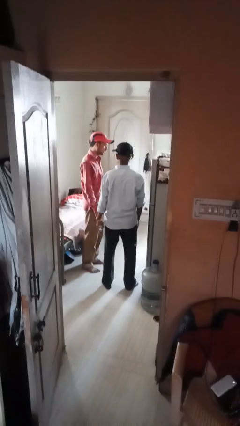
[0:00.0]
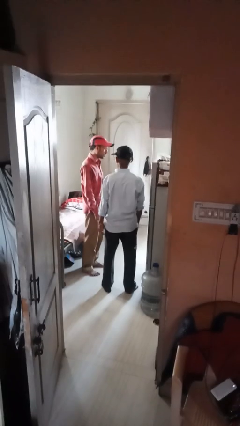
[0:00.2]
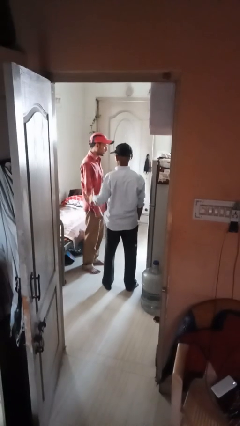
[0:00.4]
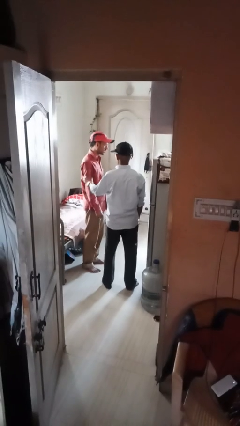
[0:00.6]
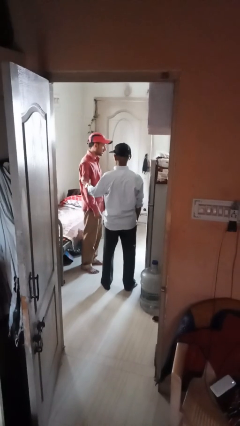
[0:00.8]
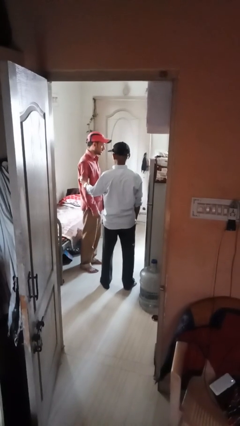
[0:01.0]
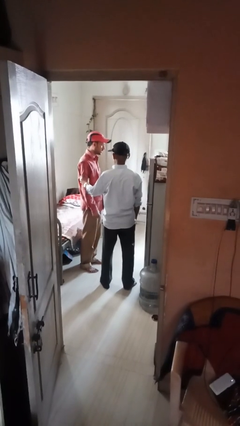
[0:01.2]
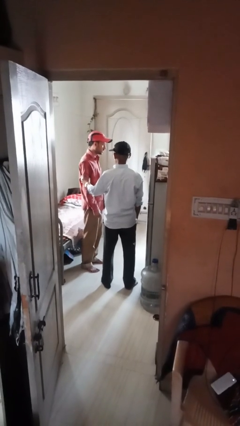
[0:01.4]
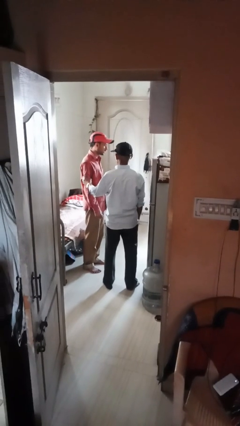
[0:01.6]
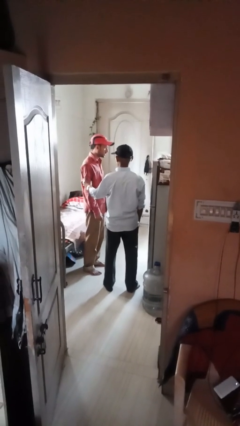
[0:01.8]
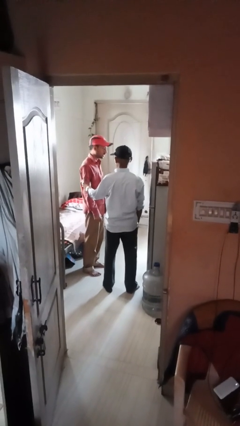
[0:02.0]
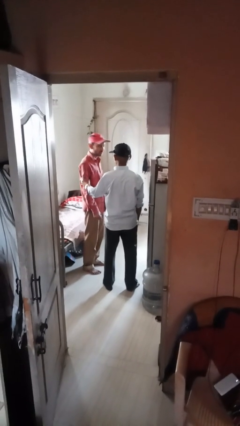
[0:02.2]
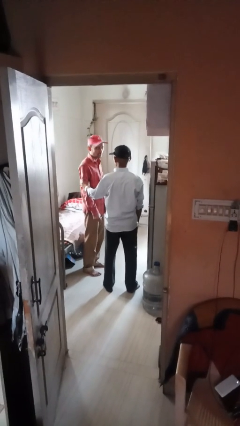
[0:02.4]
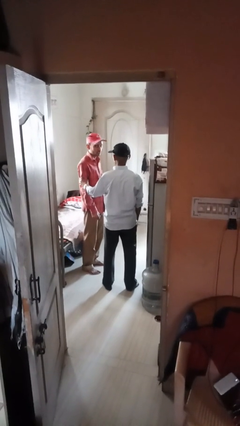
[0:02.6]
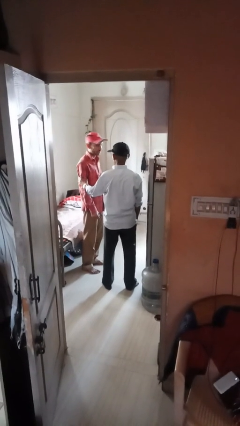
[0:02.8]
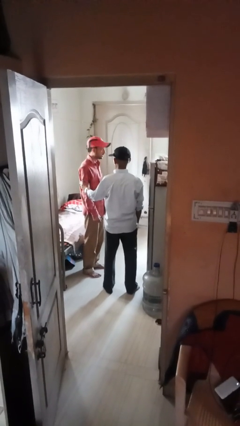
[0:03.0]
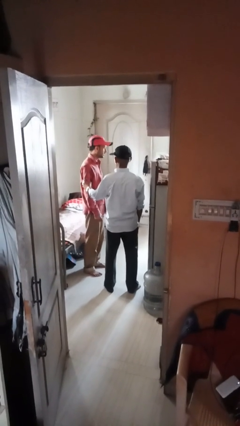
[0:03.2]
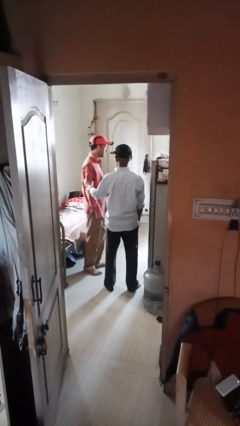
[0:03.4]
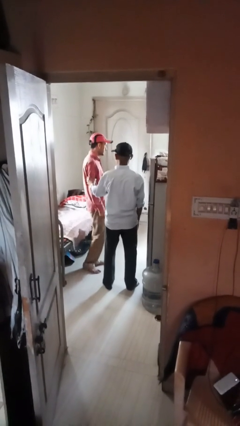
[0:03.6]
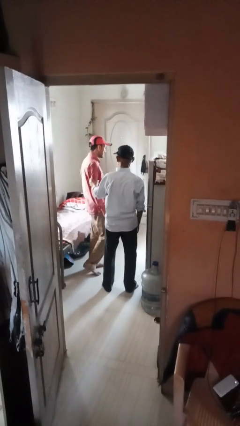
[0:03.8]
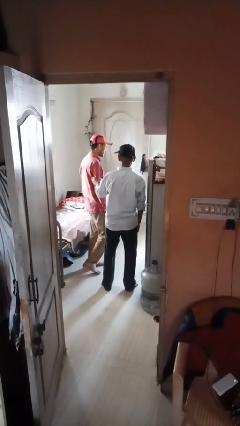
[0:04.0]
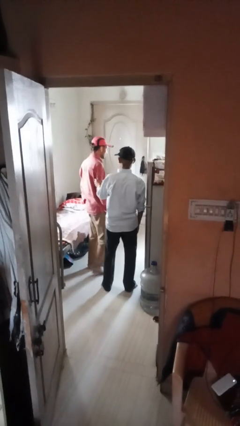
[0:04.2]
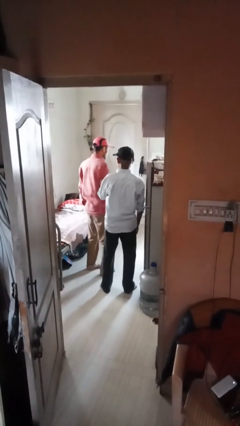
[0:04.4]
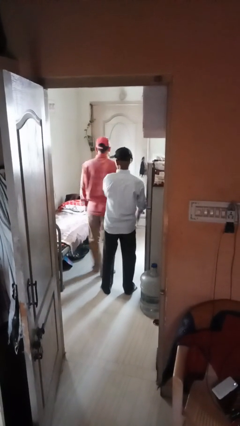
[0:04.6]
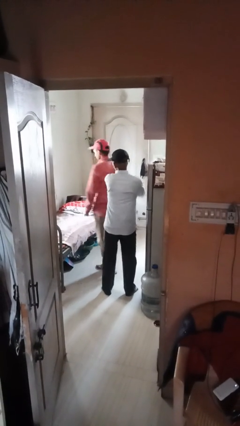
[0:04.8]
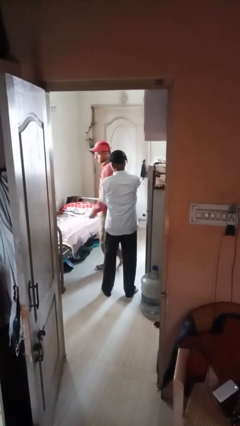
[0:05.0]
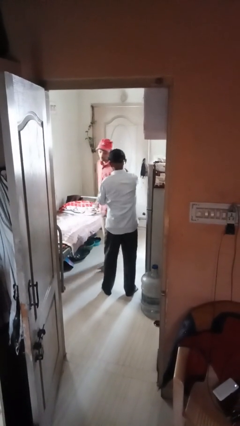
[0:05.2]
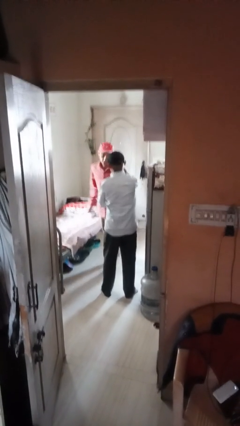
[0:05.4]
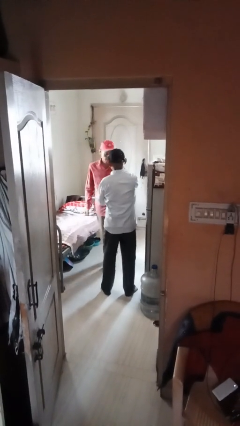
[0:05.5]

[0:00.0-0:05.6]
person spins person around

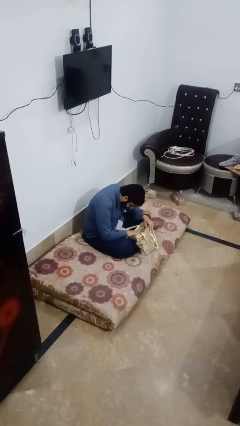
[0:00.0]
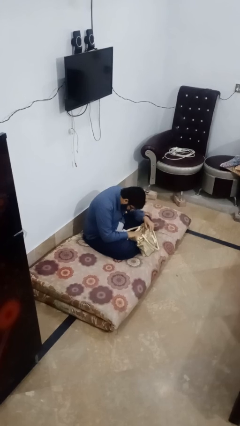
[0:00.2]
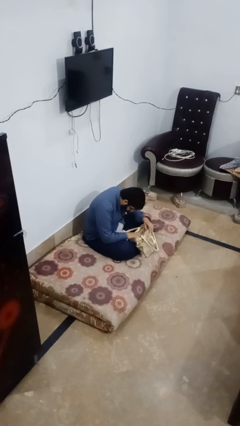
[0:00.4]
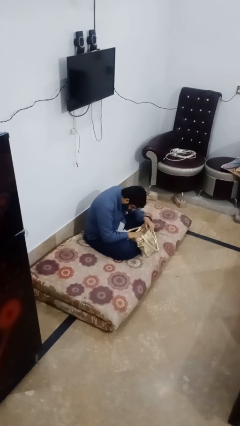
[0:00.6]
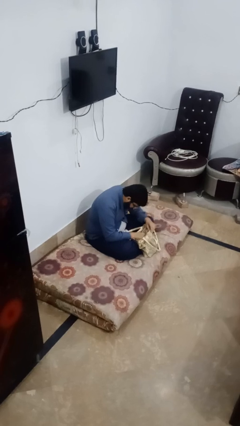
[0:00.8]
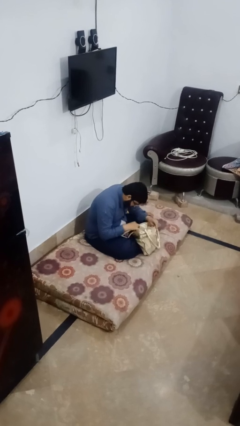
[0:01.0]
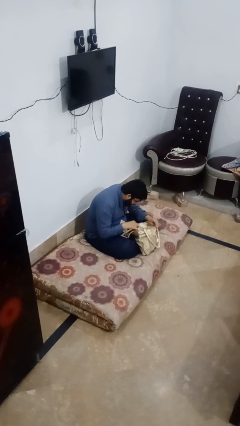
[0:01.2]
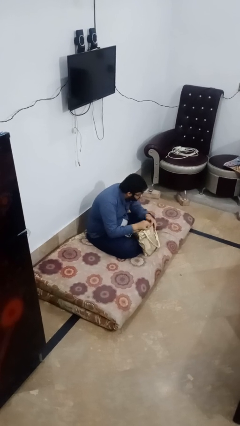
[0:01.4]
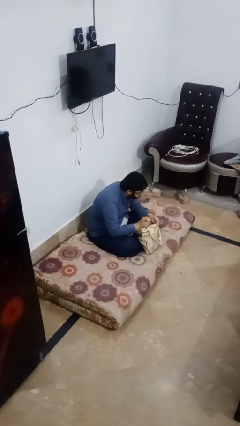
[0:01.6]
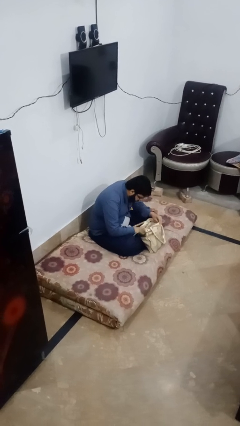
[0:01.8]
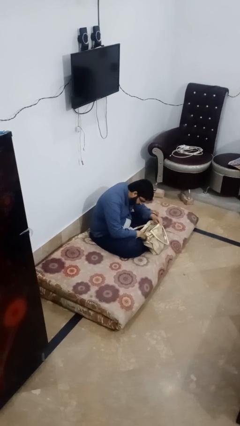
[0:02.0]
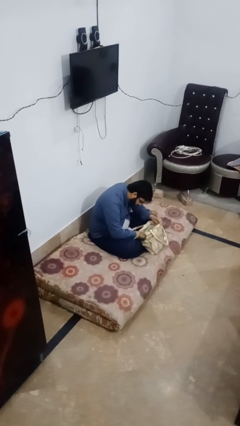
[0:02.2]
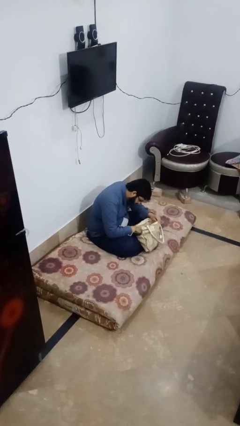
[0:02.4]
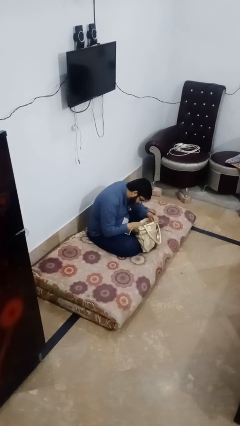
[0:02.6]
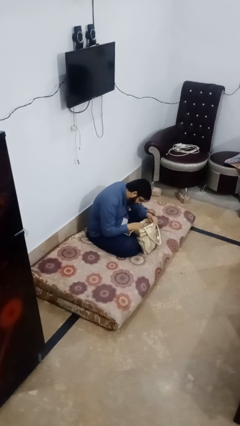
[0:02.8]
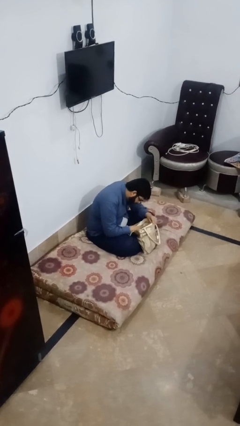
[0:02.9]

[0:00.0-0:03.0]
person searches in bag

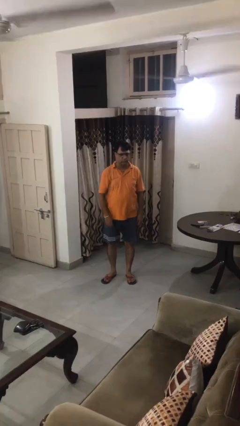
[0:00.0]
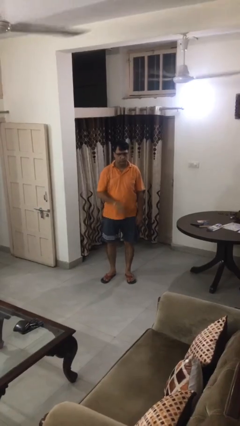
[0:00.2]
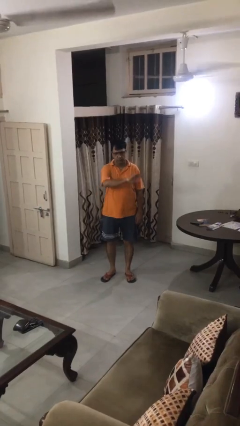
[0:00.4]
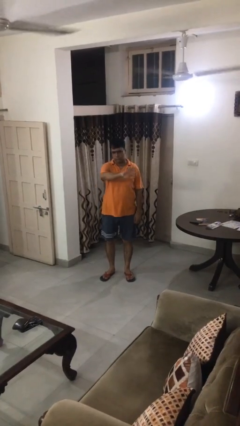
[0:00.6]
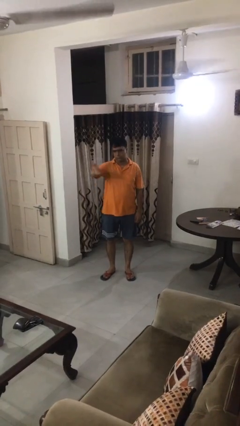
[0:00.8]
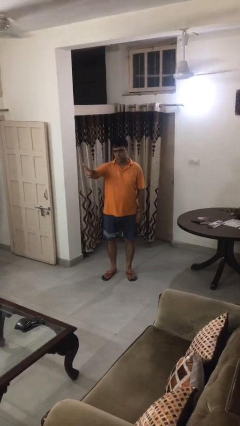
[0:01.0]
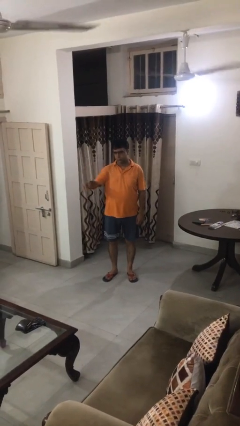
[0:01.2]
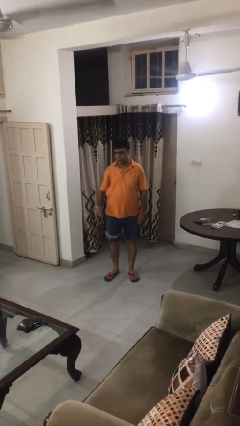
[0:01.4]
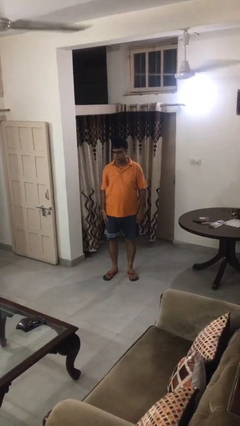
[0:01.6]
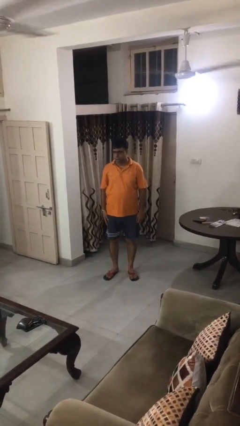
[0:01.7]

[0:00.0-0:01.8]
person gestures swipe right

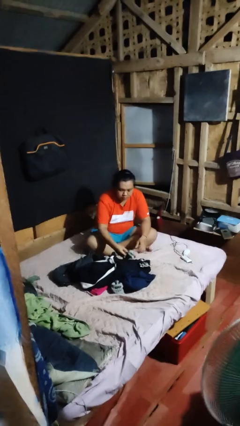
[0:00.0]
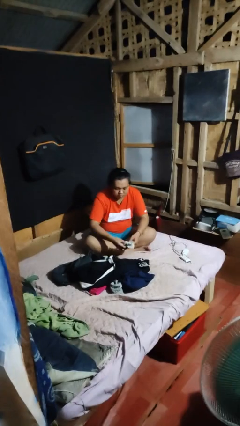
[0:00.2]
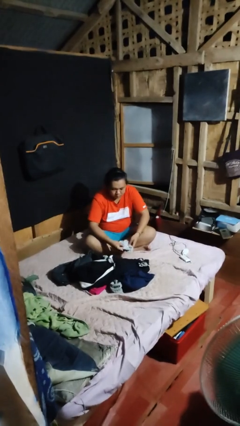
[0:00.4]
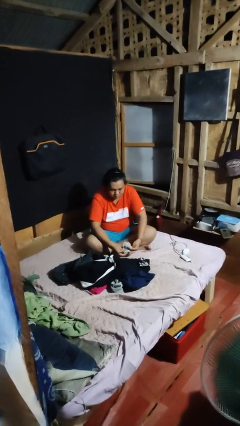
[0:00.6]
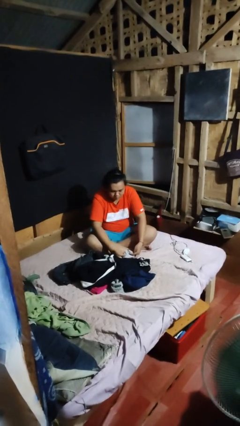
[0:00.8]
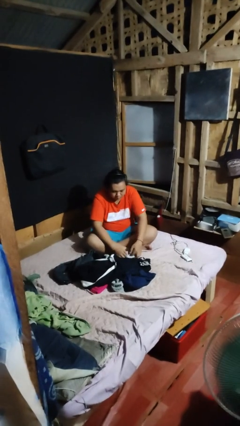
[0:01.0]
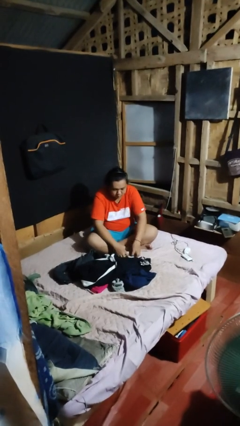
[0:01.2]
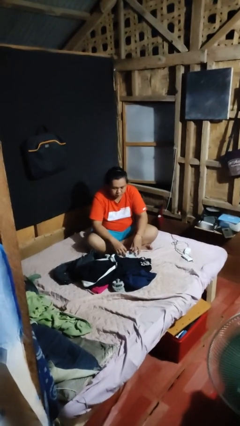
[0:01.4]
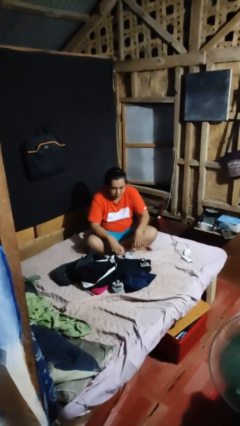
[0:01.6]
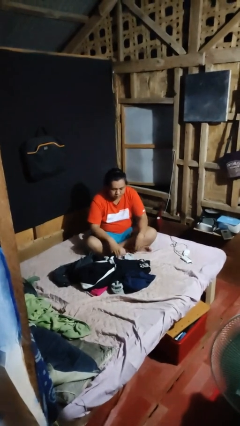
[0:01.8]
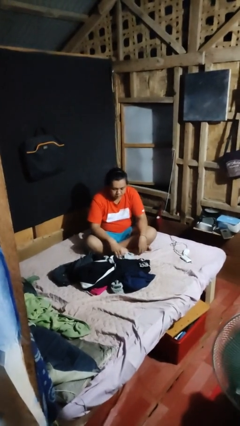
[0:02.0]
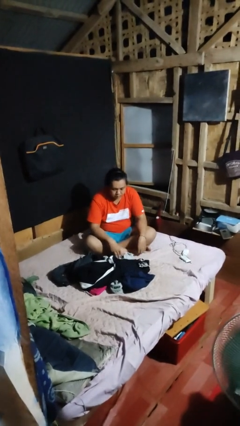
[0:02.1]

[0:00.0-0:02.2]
person folds socks

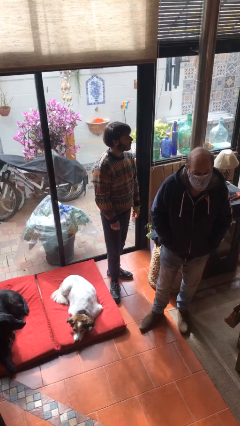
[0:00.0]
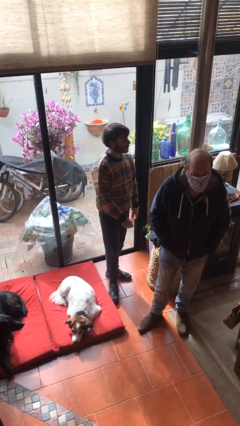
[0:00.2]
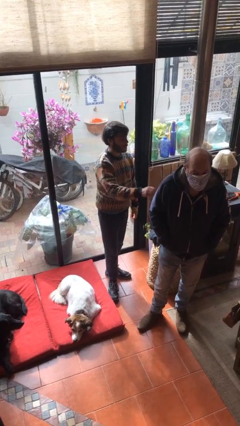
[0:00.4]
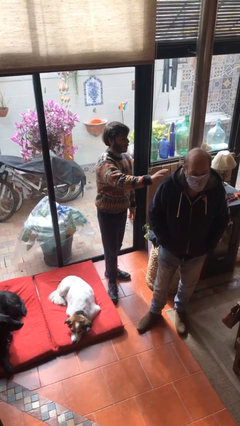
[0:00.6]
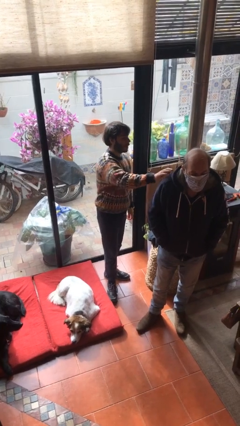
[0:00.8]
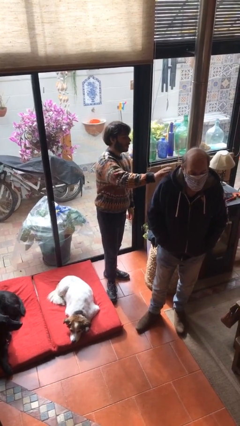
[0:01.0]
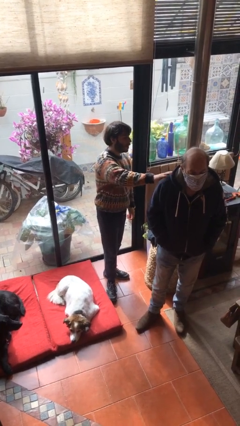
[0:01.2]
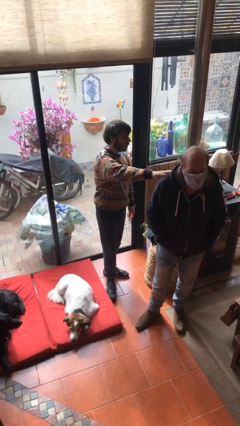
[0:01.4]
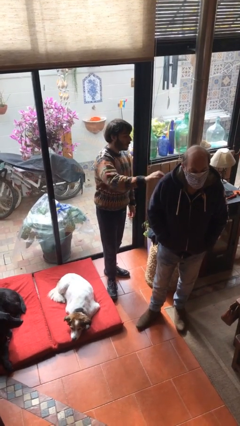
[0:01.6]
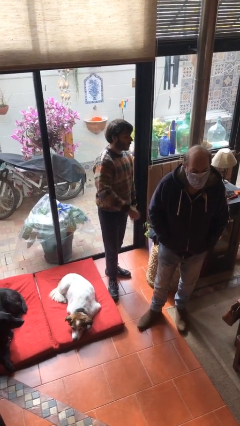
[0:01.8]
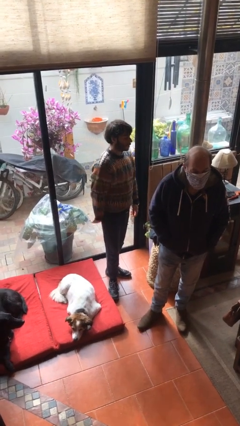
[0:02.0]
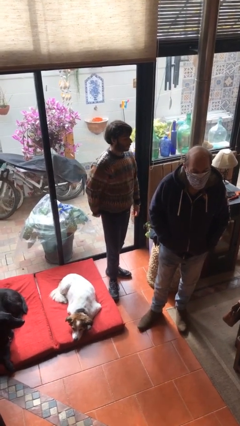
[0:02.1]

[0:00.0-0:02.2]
person touches back of person

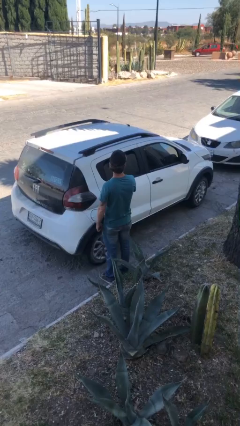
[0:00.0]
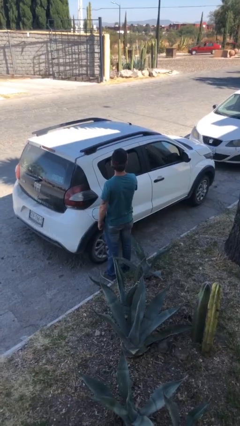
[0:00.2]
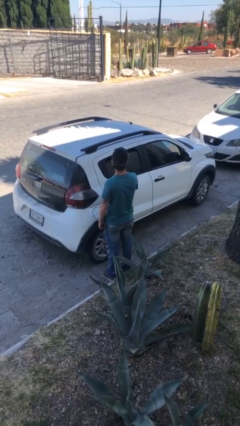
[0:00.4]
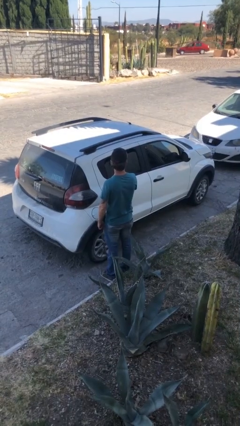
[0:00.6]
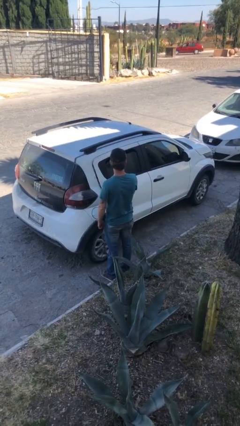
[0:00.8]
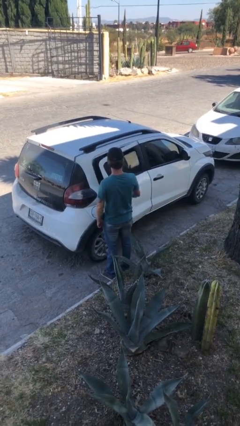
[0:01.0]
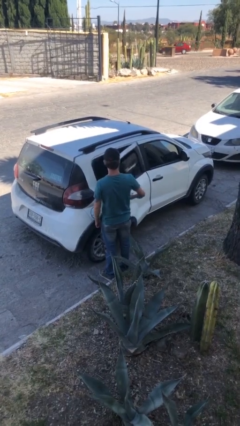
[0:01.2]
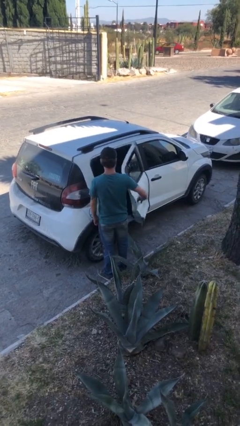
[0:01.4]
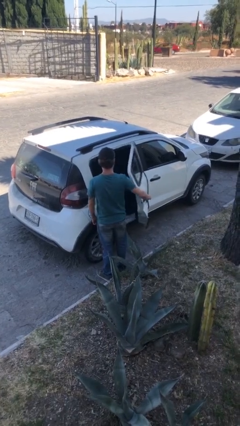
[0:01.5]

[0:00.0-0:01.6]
person opens car door

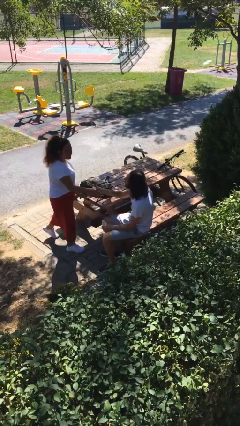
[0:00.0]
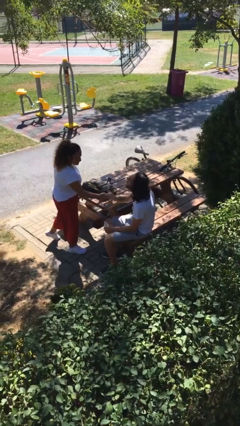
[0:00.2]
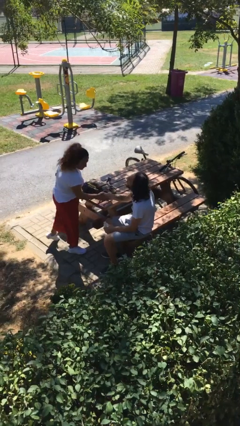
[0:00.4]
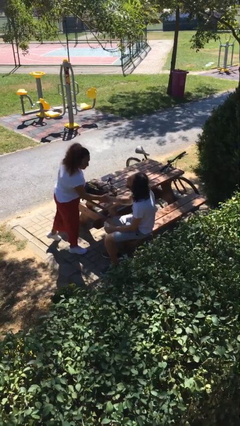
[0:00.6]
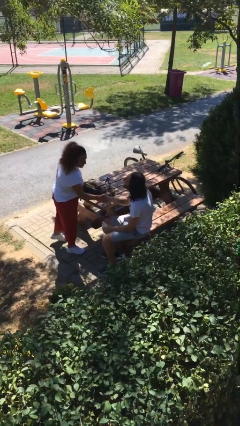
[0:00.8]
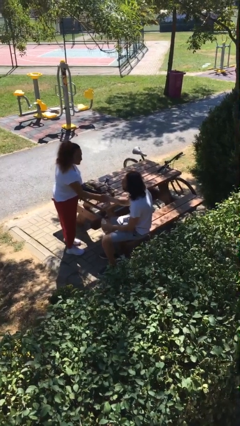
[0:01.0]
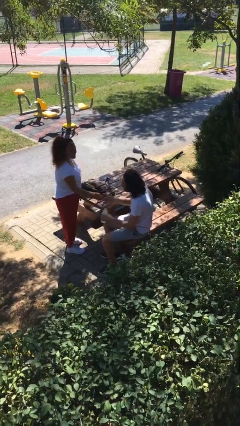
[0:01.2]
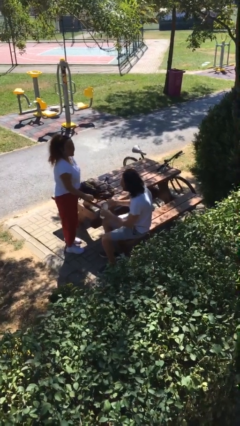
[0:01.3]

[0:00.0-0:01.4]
person shakes hand
